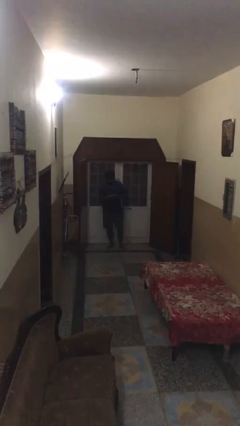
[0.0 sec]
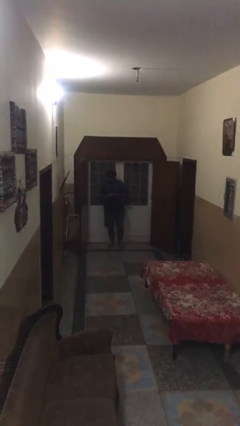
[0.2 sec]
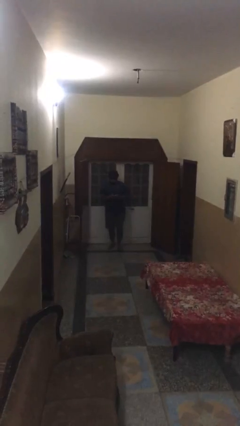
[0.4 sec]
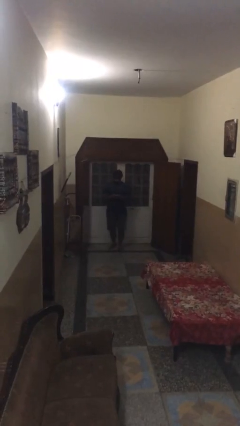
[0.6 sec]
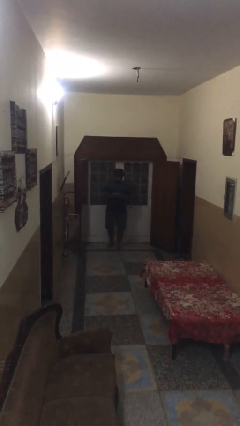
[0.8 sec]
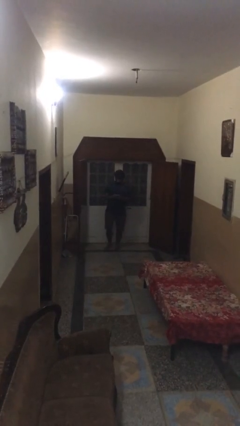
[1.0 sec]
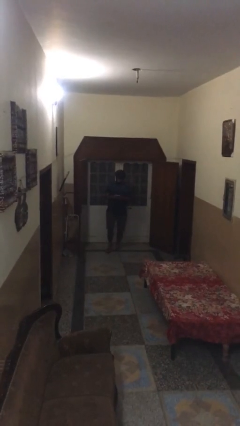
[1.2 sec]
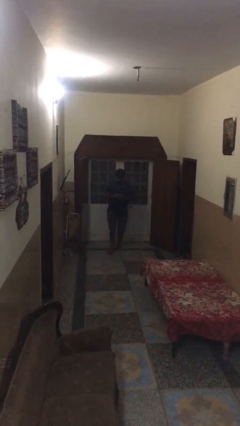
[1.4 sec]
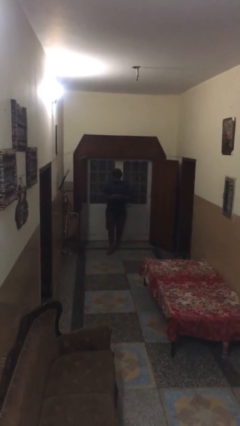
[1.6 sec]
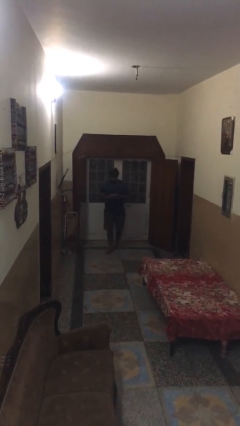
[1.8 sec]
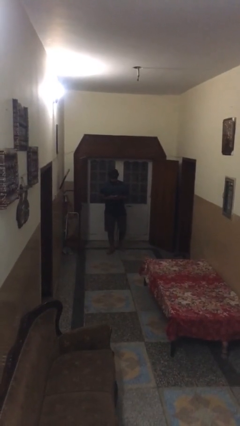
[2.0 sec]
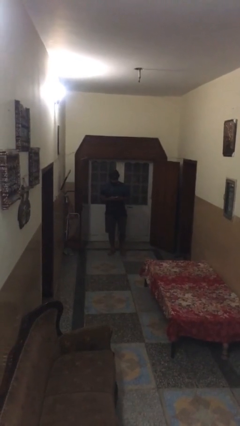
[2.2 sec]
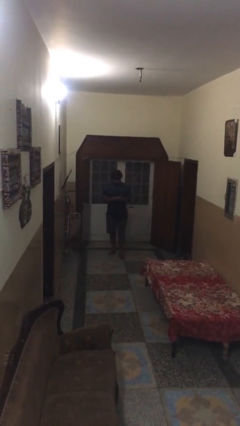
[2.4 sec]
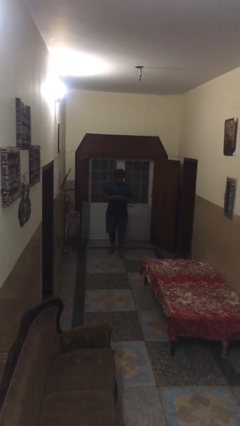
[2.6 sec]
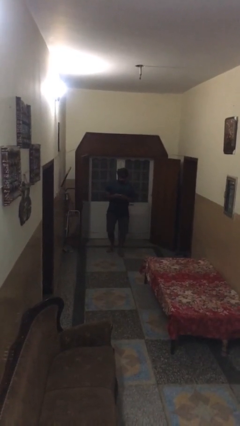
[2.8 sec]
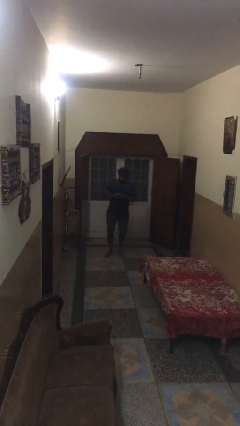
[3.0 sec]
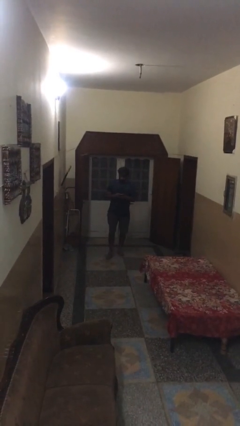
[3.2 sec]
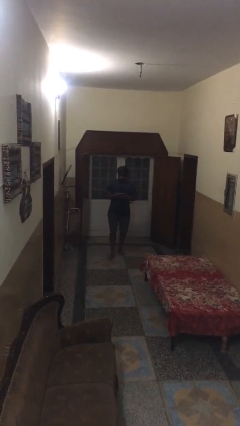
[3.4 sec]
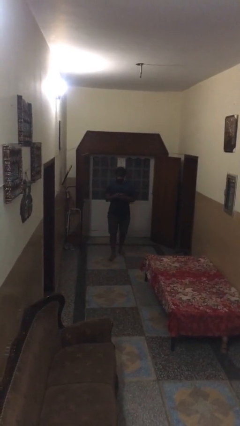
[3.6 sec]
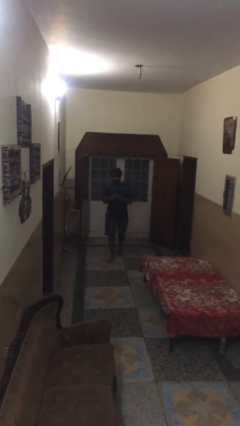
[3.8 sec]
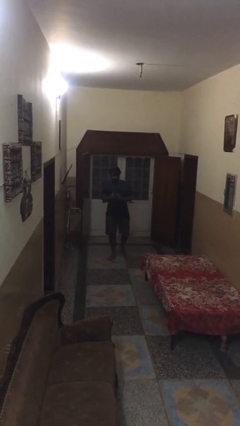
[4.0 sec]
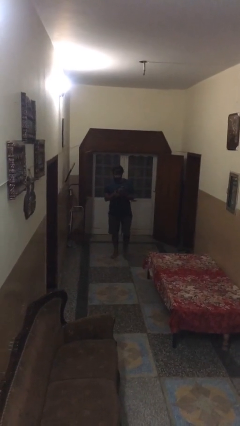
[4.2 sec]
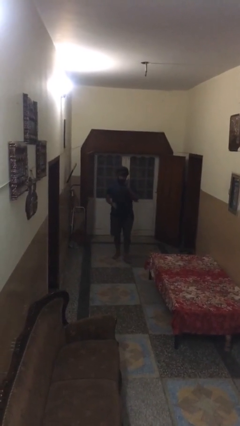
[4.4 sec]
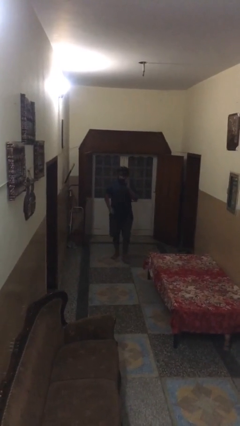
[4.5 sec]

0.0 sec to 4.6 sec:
person texts on phone

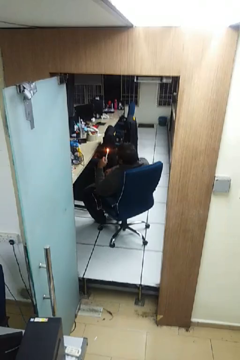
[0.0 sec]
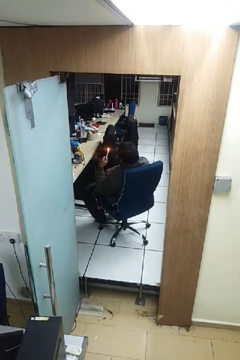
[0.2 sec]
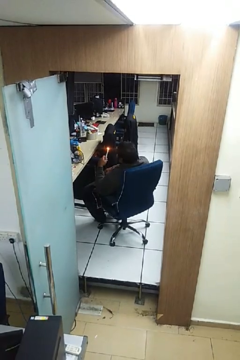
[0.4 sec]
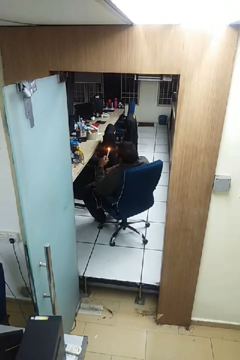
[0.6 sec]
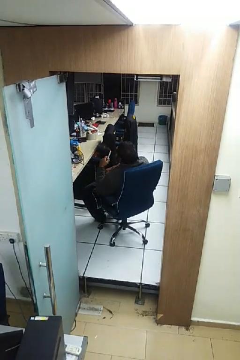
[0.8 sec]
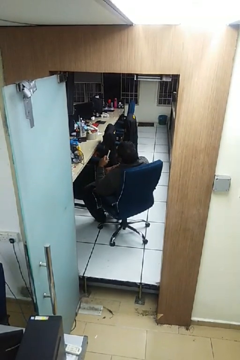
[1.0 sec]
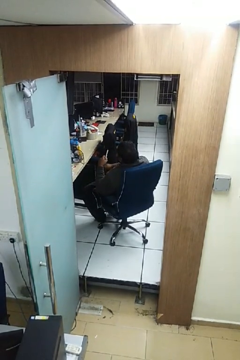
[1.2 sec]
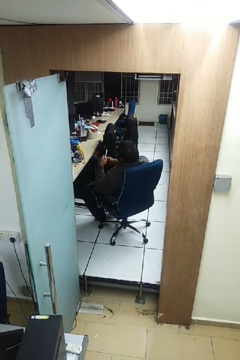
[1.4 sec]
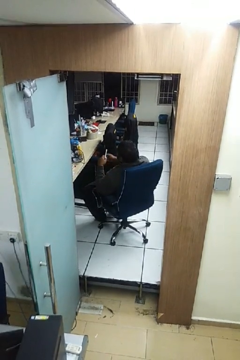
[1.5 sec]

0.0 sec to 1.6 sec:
person extinguishes candle

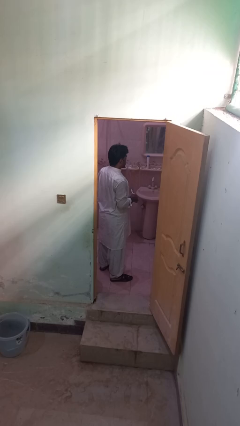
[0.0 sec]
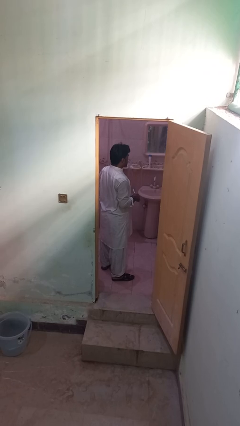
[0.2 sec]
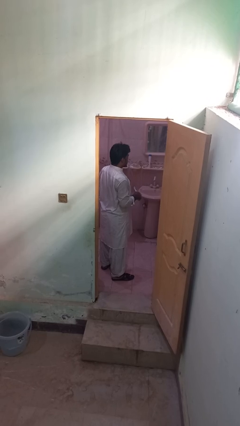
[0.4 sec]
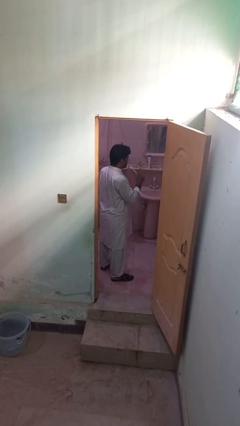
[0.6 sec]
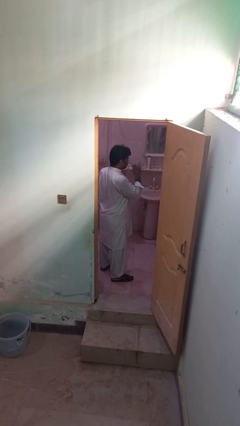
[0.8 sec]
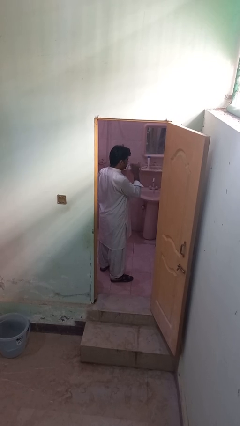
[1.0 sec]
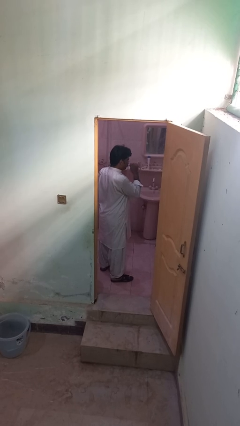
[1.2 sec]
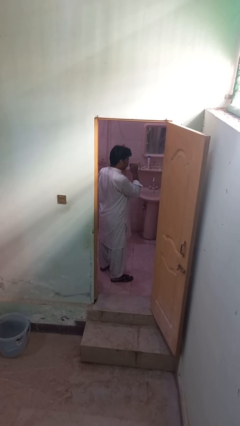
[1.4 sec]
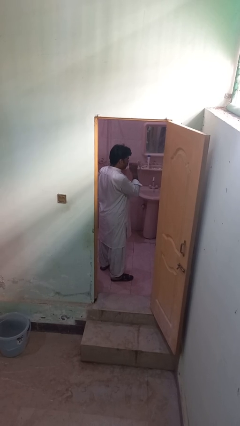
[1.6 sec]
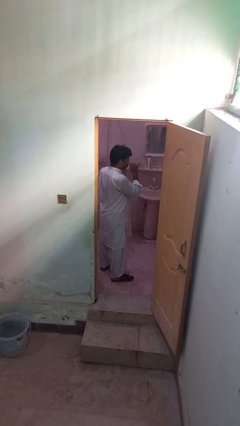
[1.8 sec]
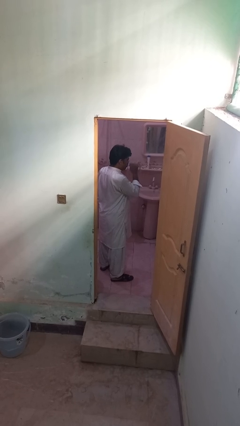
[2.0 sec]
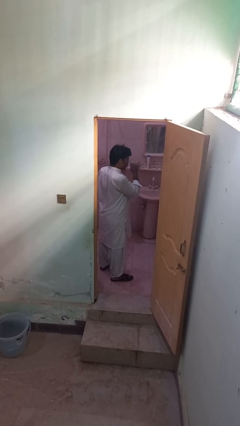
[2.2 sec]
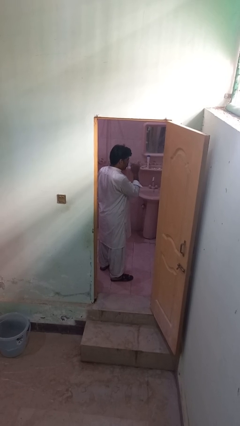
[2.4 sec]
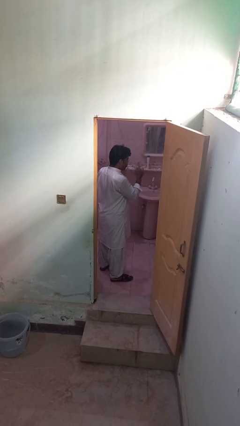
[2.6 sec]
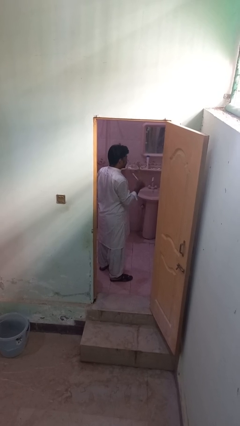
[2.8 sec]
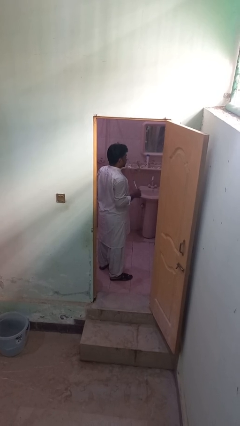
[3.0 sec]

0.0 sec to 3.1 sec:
person brushes teeth

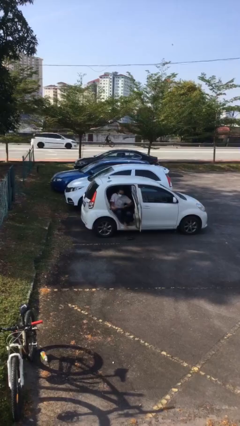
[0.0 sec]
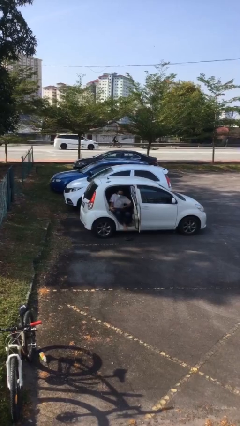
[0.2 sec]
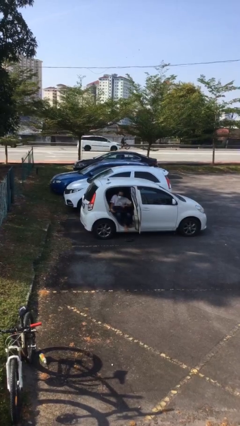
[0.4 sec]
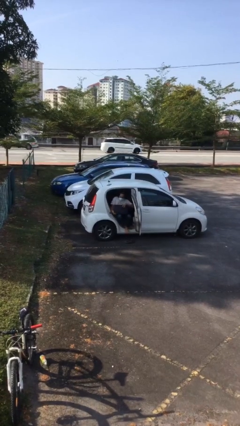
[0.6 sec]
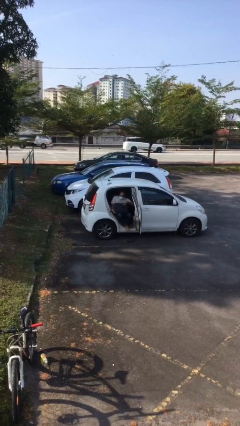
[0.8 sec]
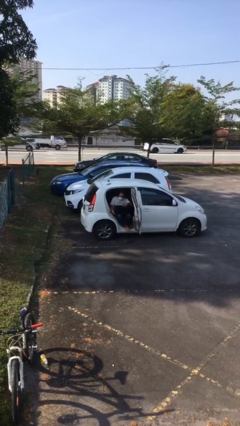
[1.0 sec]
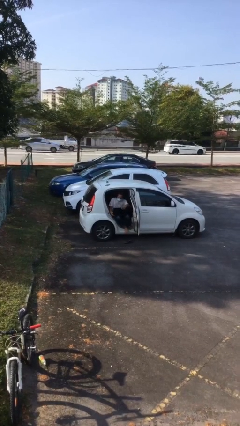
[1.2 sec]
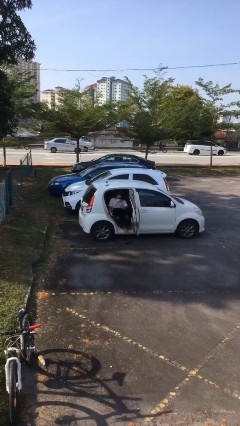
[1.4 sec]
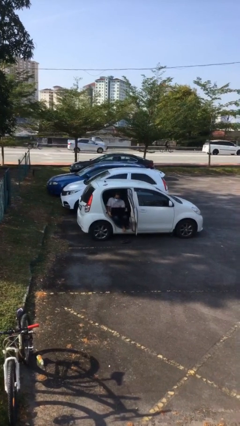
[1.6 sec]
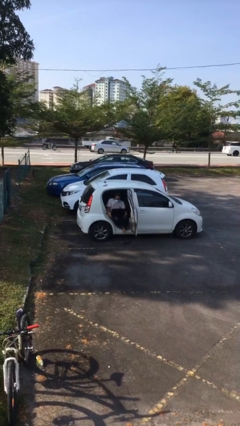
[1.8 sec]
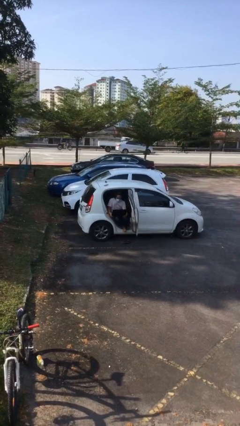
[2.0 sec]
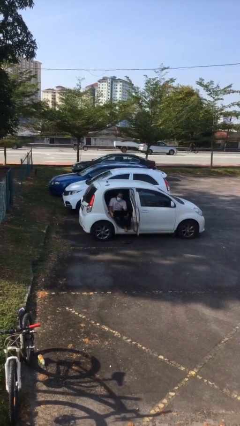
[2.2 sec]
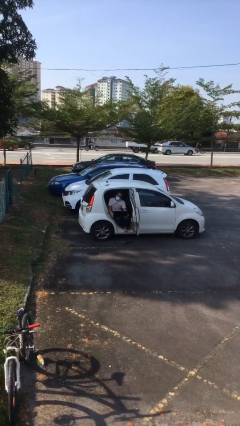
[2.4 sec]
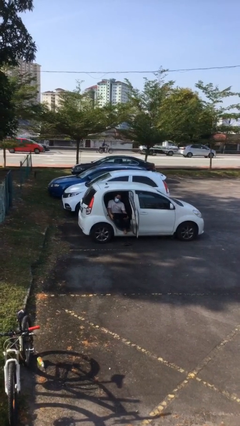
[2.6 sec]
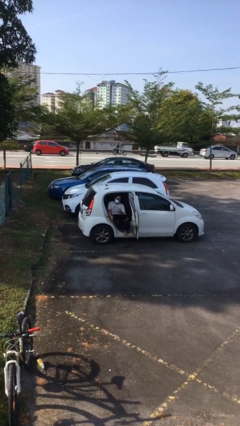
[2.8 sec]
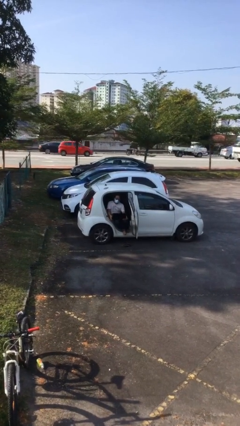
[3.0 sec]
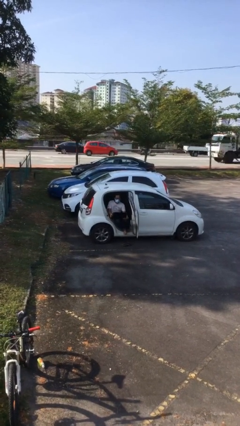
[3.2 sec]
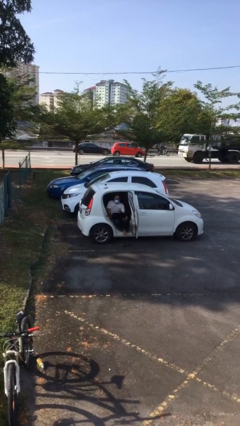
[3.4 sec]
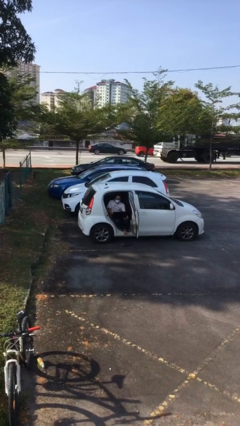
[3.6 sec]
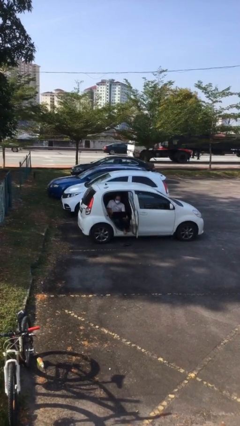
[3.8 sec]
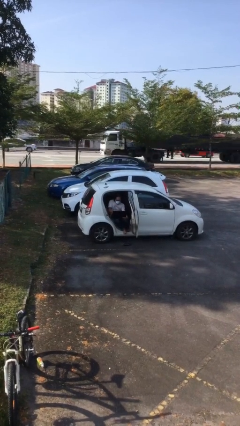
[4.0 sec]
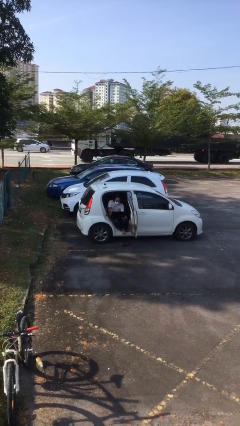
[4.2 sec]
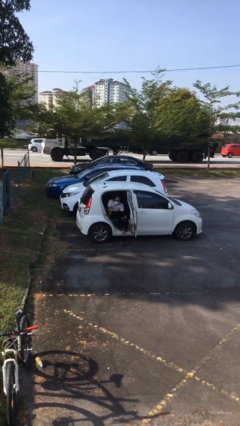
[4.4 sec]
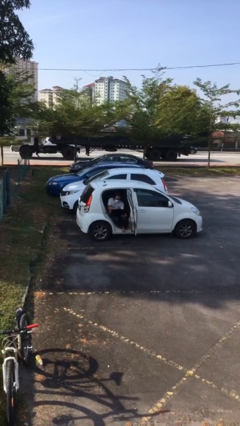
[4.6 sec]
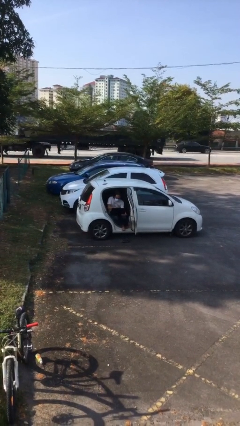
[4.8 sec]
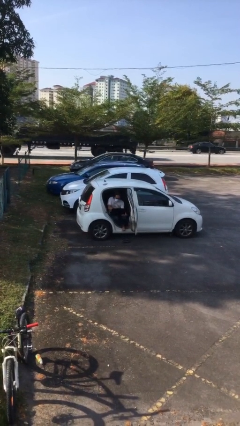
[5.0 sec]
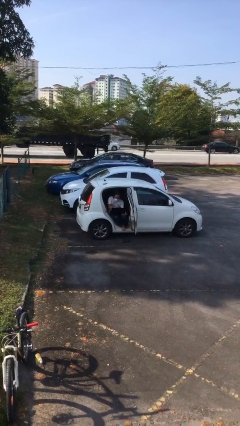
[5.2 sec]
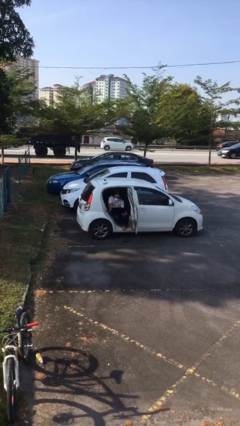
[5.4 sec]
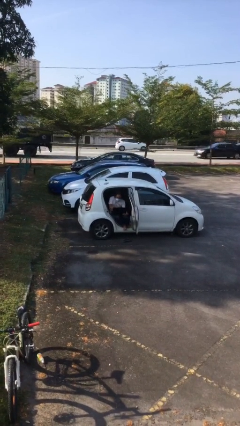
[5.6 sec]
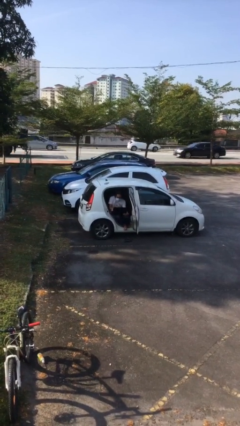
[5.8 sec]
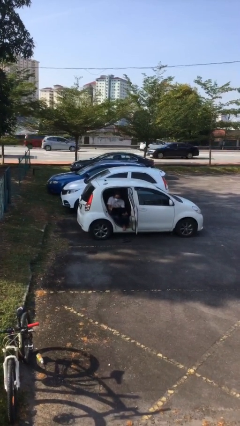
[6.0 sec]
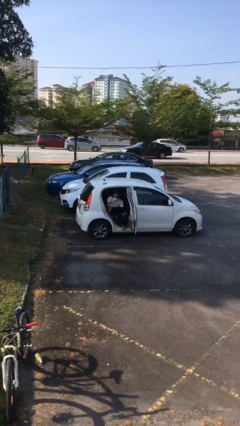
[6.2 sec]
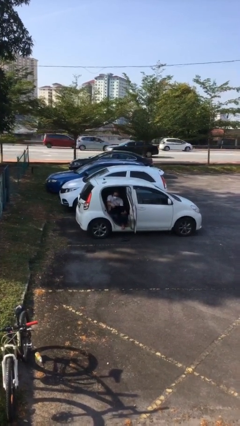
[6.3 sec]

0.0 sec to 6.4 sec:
person interacts with laptop

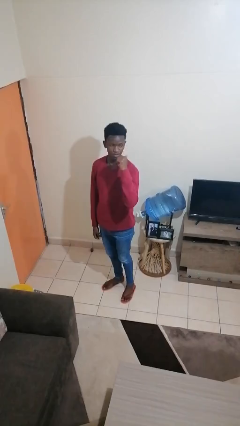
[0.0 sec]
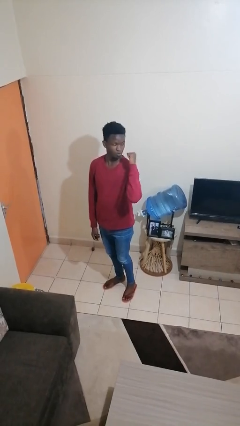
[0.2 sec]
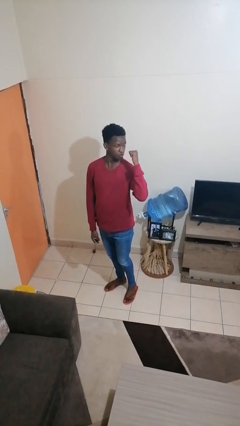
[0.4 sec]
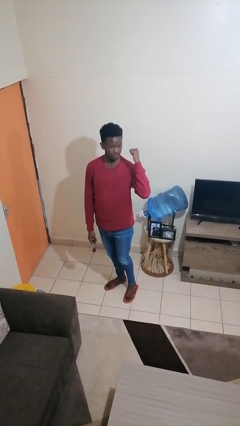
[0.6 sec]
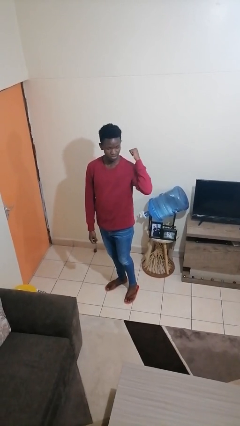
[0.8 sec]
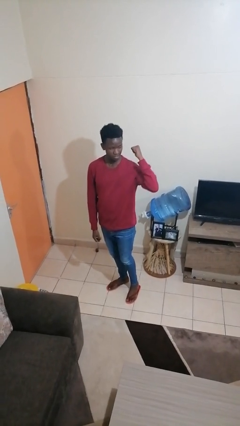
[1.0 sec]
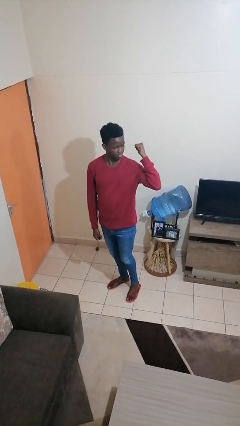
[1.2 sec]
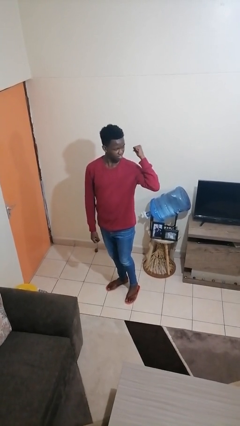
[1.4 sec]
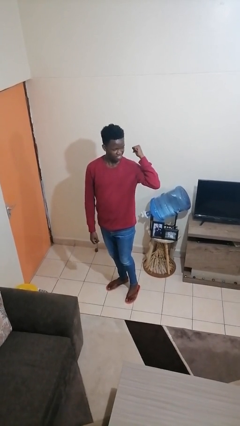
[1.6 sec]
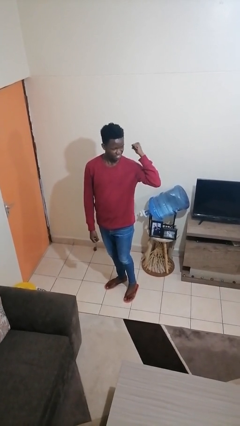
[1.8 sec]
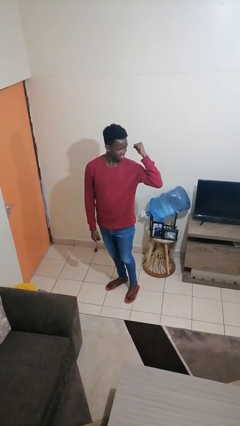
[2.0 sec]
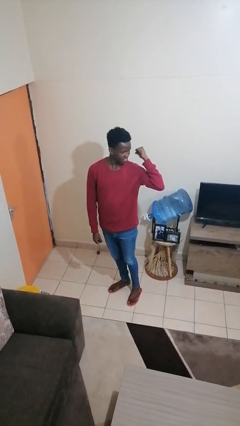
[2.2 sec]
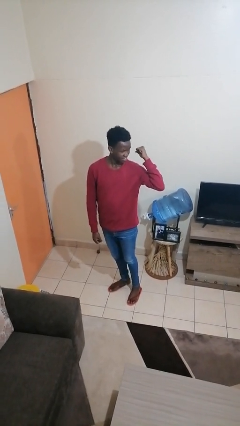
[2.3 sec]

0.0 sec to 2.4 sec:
person gestures behind me

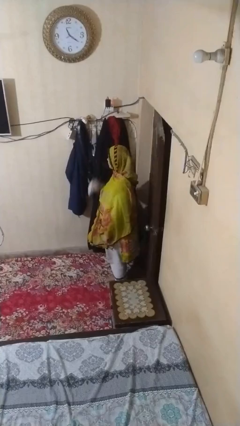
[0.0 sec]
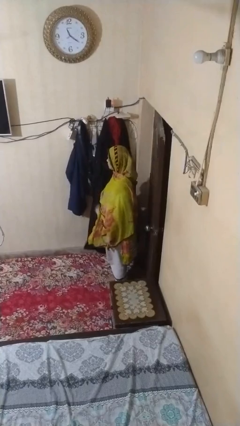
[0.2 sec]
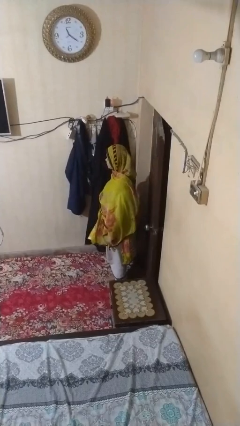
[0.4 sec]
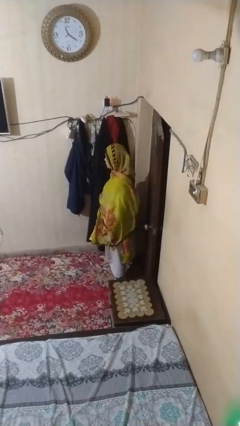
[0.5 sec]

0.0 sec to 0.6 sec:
person unplugs from electrical socket
